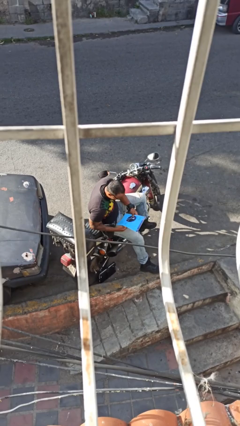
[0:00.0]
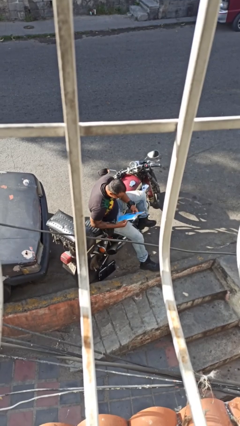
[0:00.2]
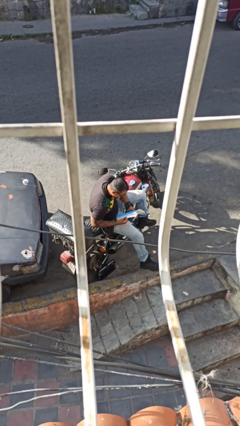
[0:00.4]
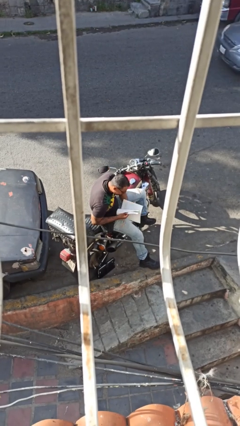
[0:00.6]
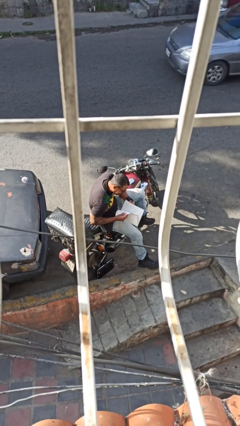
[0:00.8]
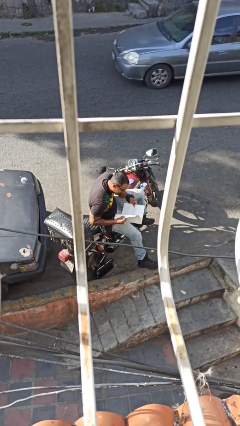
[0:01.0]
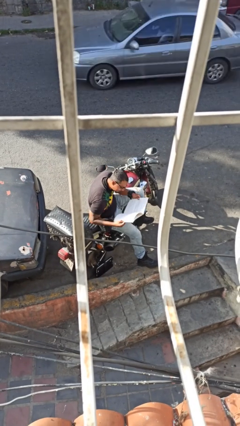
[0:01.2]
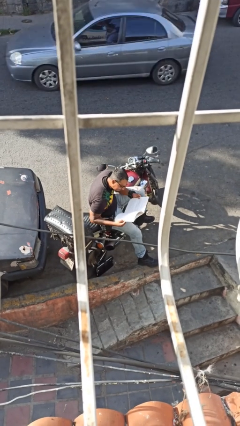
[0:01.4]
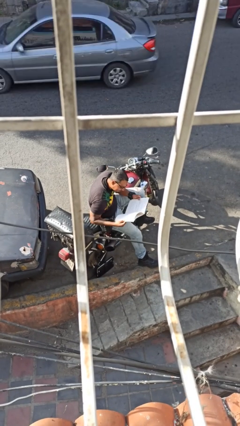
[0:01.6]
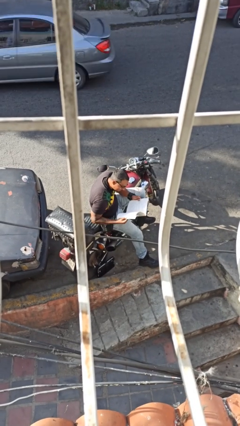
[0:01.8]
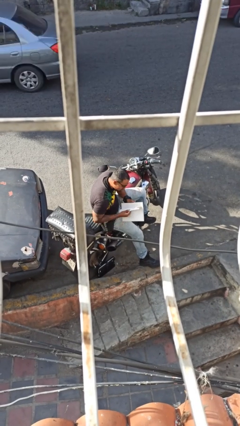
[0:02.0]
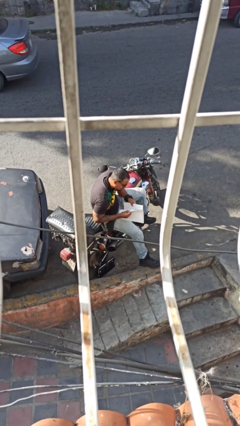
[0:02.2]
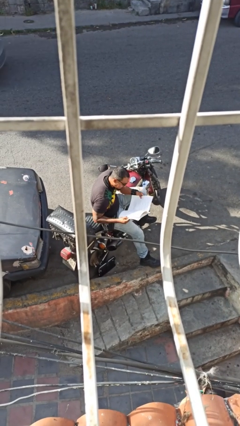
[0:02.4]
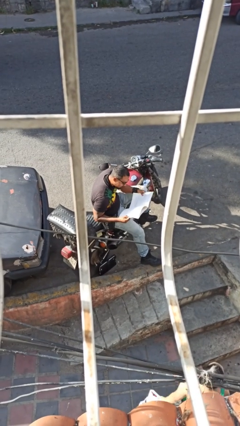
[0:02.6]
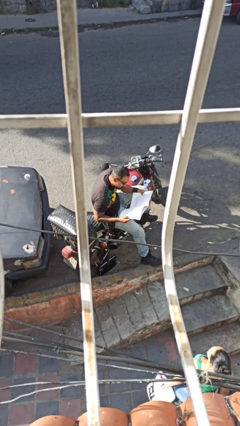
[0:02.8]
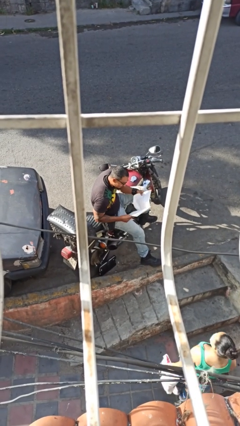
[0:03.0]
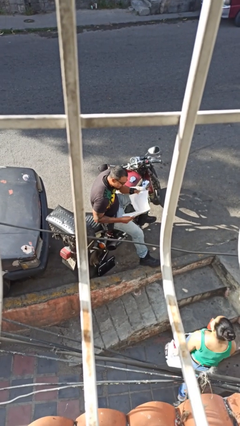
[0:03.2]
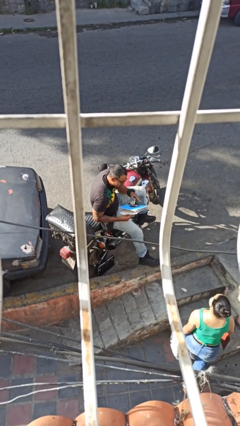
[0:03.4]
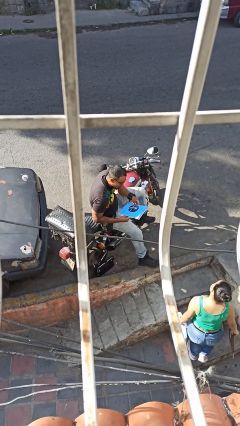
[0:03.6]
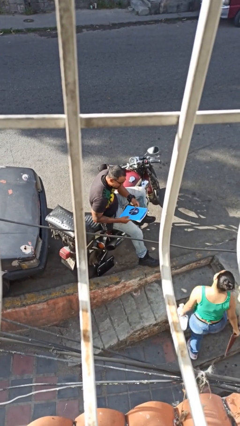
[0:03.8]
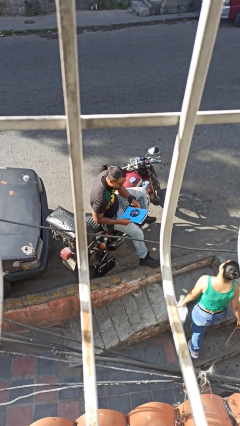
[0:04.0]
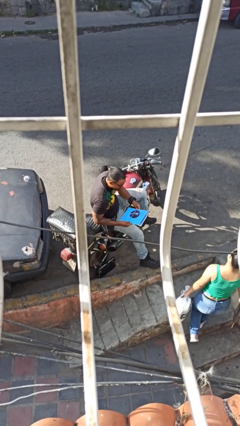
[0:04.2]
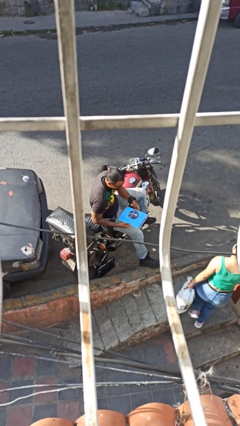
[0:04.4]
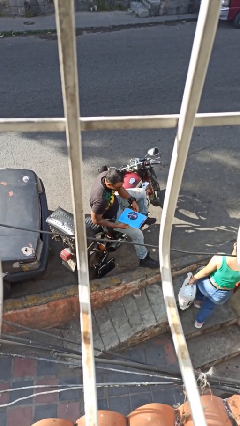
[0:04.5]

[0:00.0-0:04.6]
person reads document

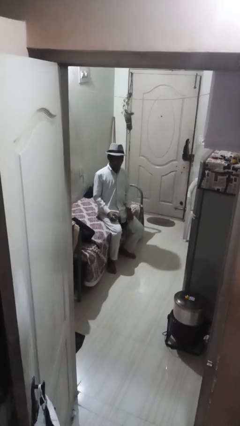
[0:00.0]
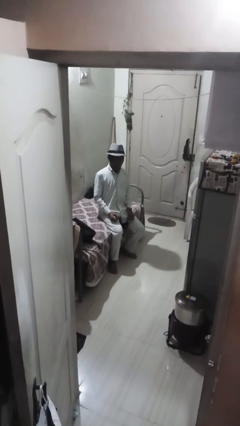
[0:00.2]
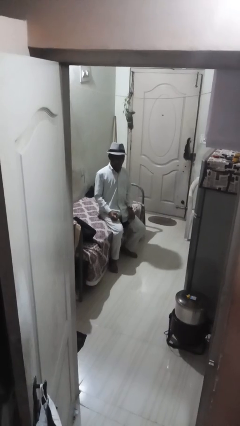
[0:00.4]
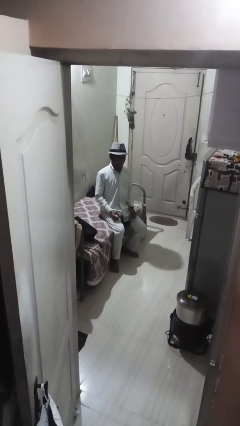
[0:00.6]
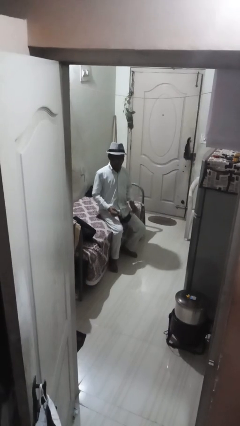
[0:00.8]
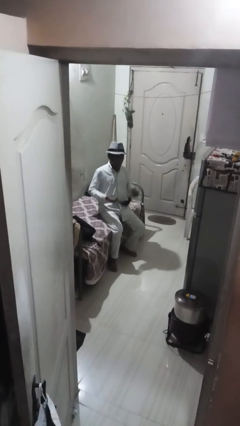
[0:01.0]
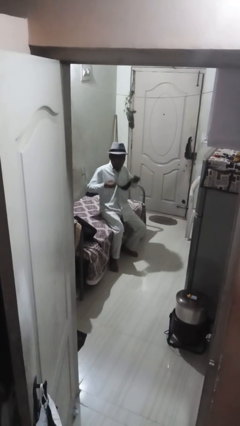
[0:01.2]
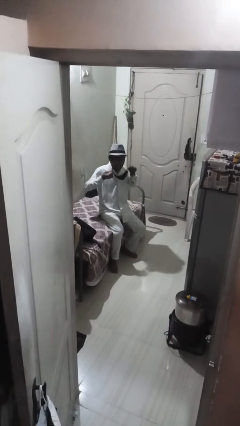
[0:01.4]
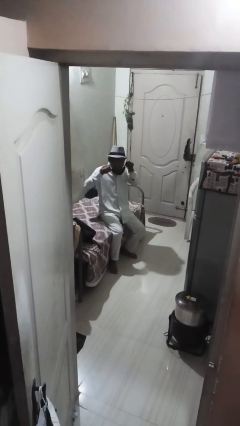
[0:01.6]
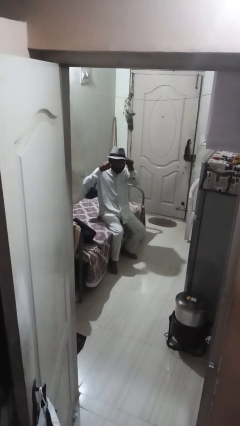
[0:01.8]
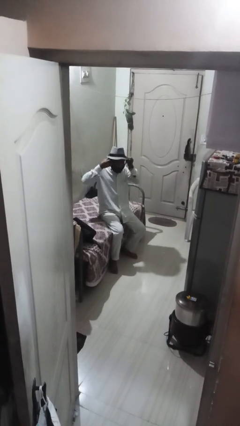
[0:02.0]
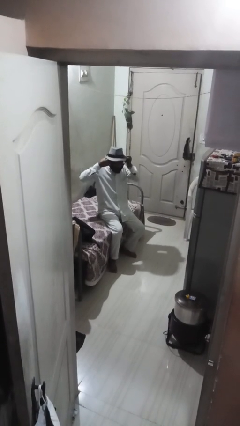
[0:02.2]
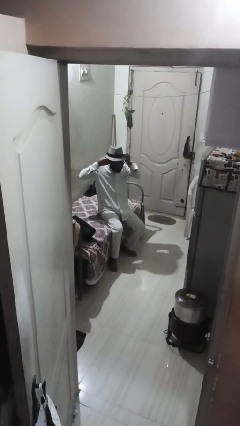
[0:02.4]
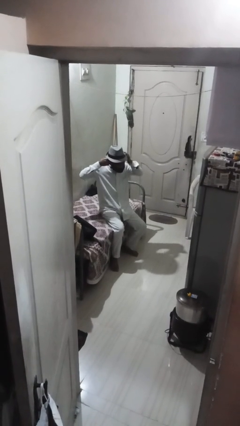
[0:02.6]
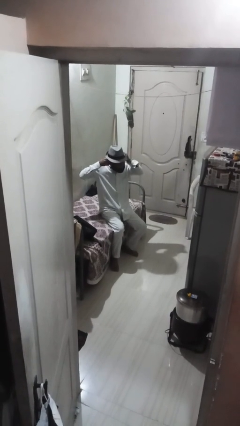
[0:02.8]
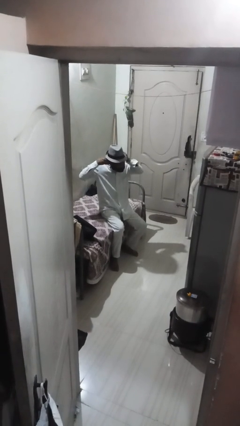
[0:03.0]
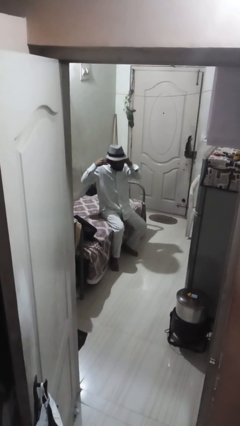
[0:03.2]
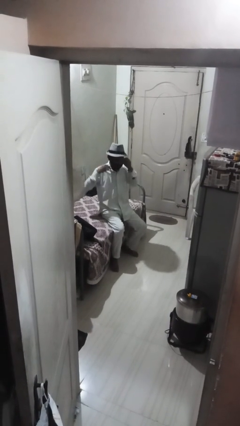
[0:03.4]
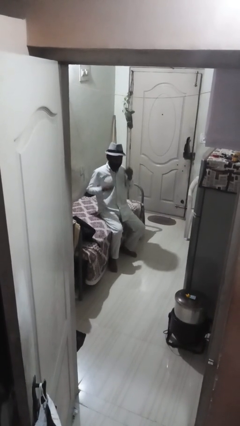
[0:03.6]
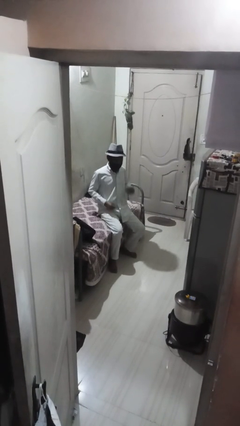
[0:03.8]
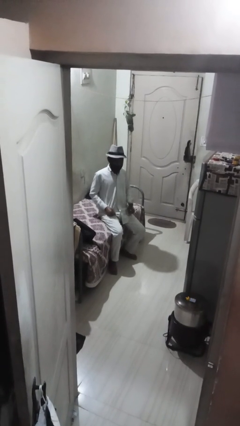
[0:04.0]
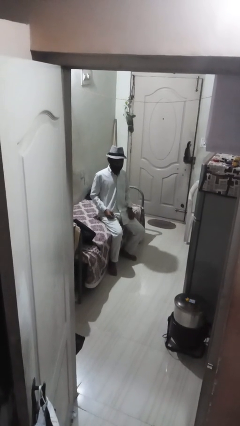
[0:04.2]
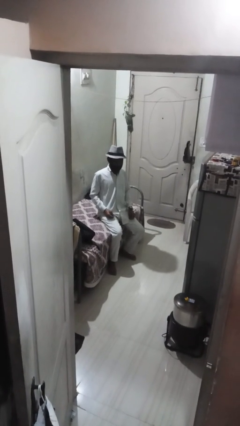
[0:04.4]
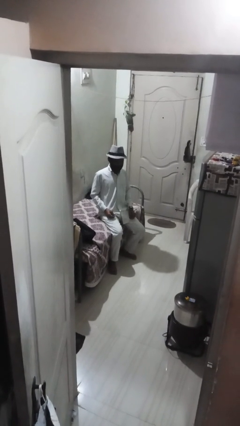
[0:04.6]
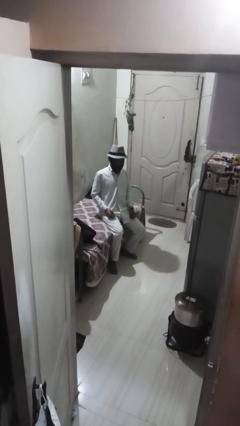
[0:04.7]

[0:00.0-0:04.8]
person puts on facemask

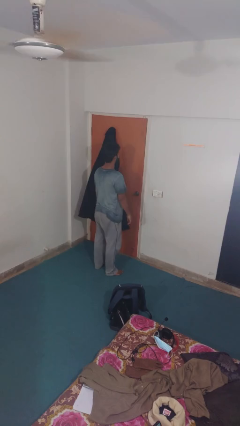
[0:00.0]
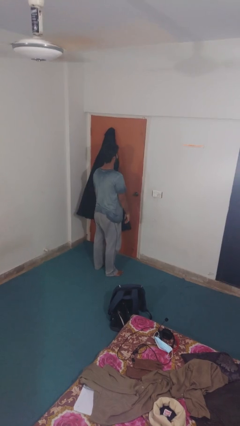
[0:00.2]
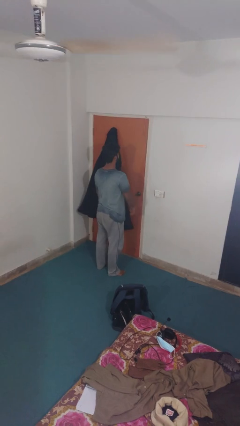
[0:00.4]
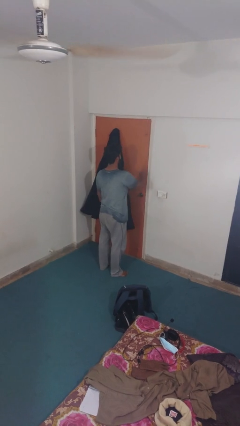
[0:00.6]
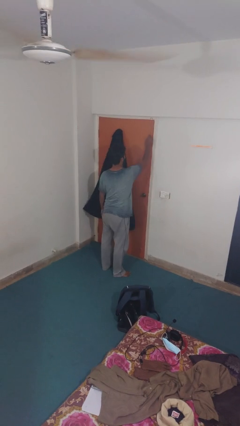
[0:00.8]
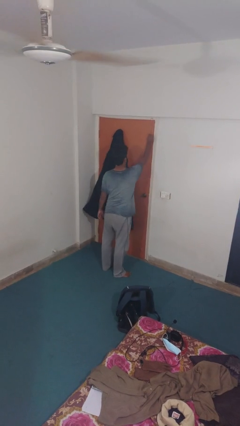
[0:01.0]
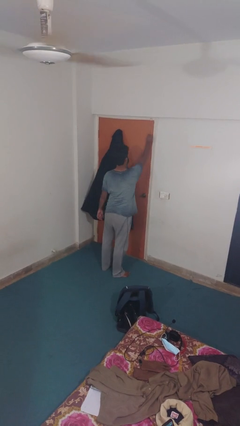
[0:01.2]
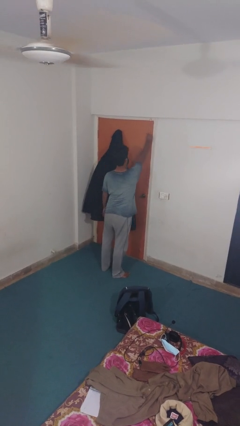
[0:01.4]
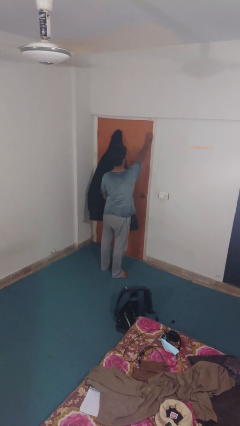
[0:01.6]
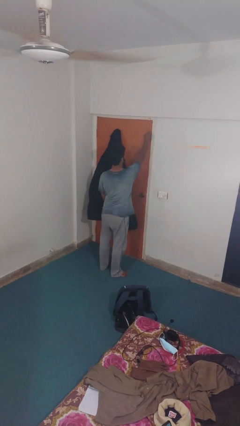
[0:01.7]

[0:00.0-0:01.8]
person locks door with keys

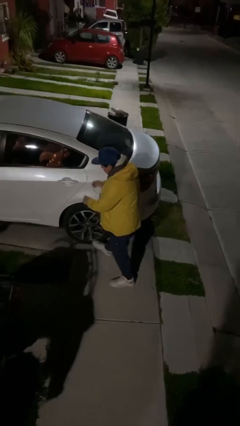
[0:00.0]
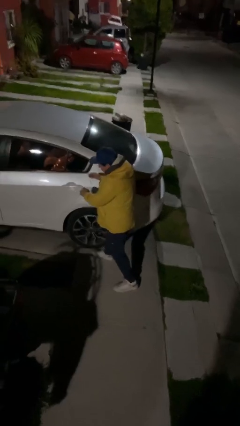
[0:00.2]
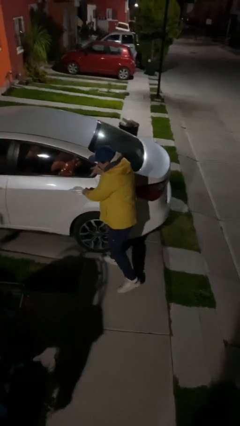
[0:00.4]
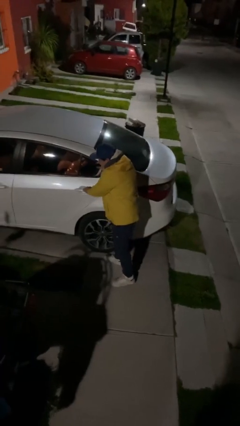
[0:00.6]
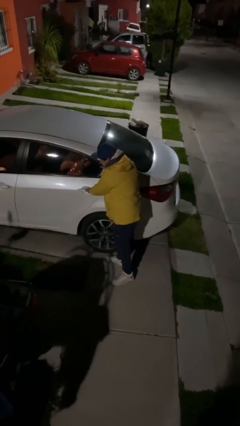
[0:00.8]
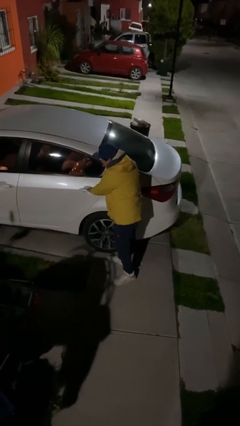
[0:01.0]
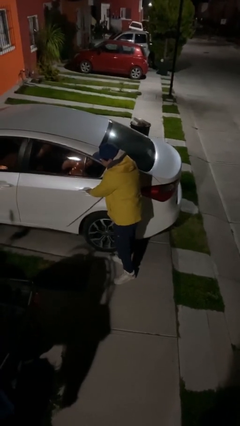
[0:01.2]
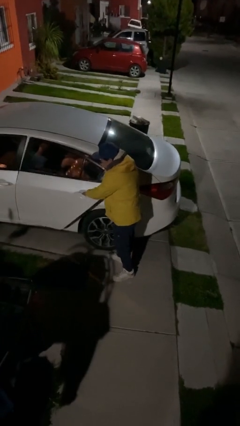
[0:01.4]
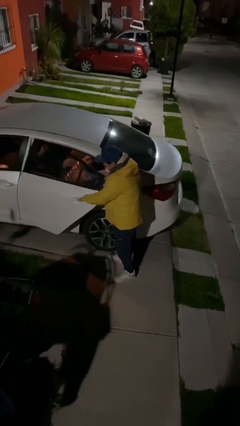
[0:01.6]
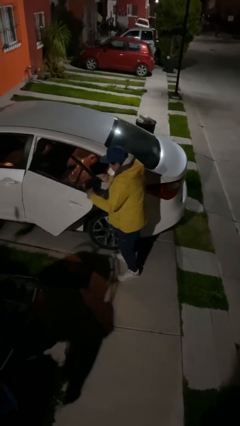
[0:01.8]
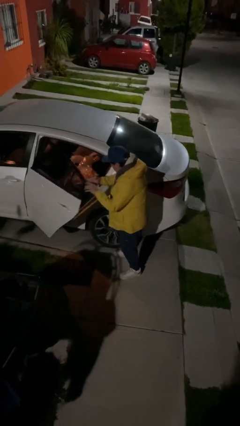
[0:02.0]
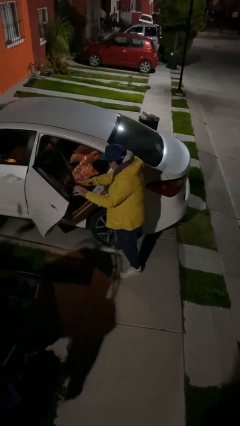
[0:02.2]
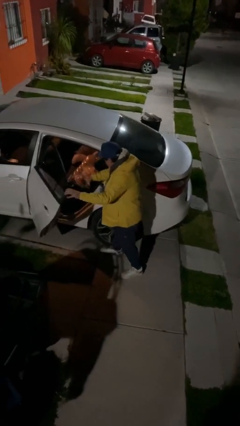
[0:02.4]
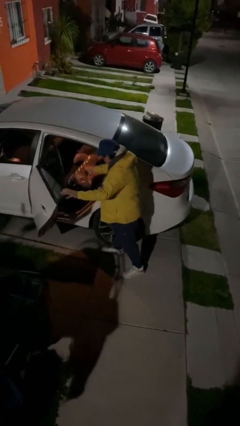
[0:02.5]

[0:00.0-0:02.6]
person opens car door

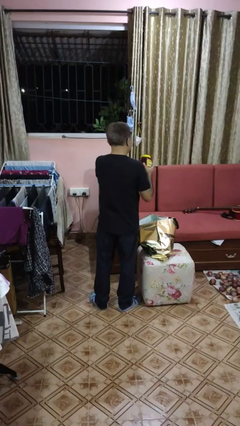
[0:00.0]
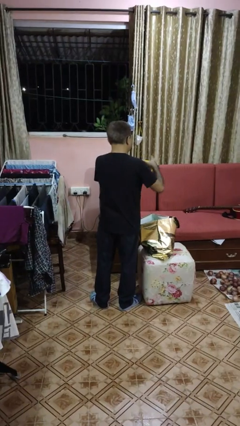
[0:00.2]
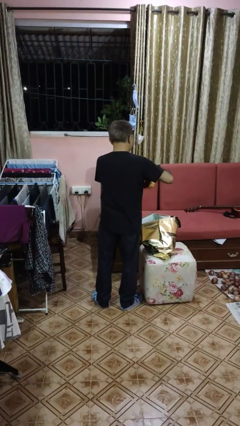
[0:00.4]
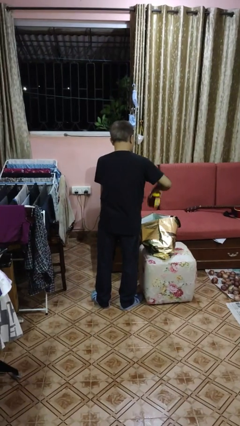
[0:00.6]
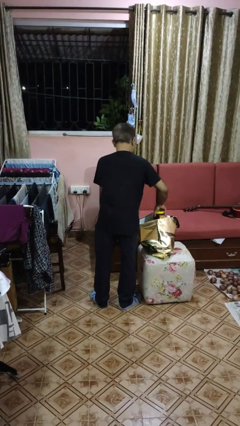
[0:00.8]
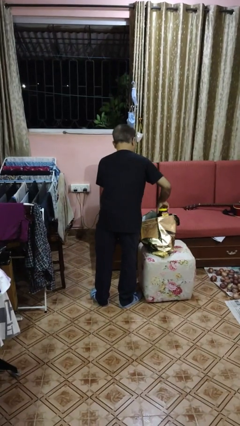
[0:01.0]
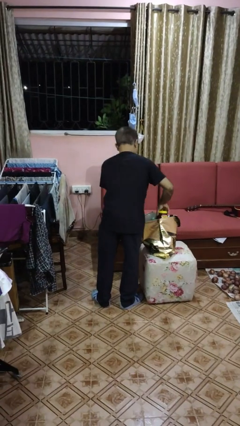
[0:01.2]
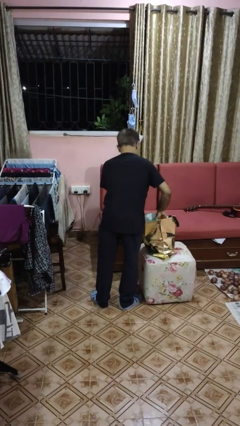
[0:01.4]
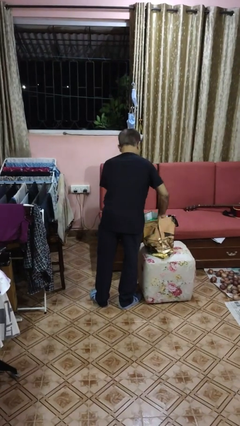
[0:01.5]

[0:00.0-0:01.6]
person puts object into bag

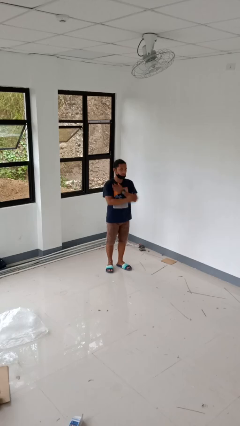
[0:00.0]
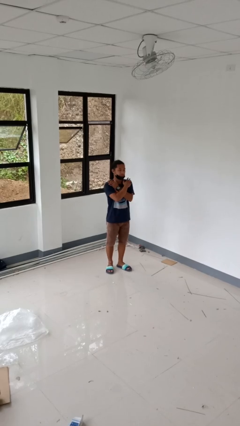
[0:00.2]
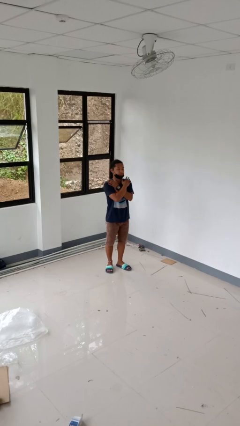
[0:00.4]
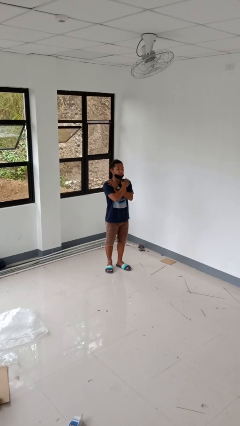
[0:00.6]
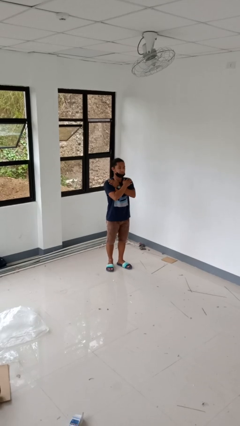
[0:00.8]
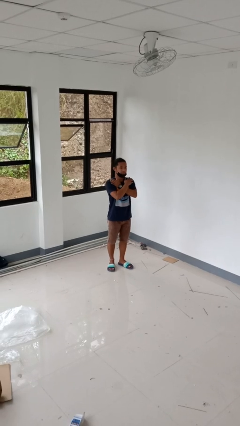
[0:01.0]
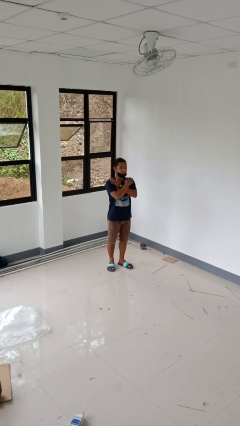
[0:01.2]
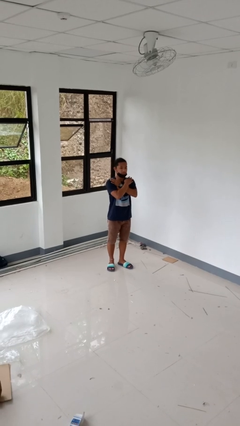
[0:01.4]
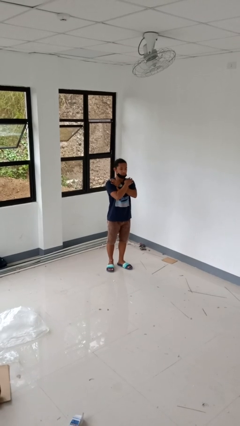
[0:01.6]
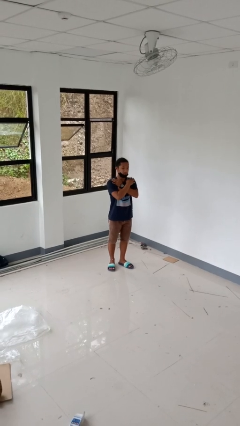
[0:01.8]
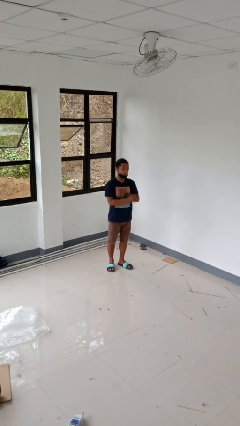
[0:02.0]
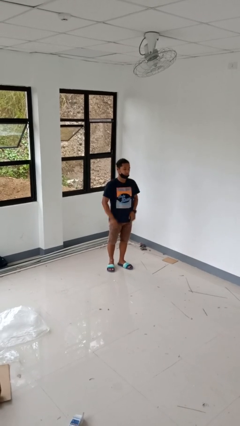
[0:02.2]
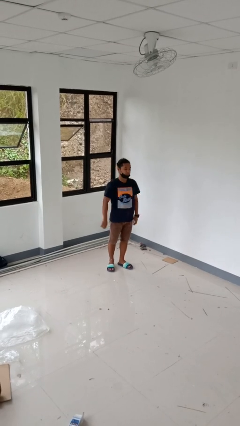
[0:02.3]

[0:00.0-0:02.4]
person gestures arms x
